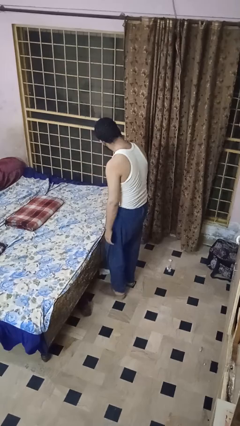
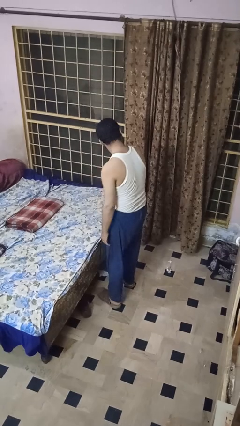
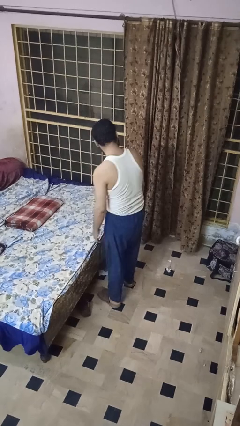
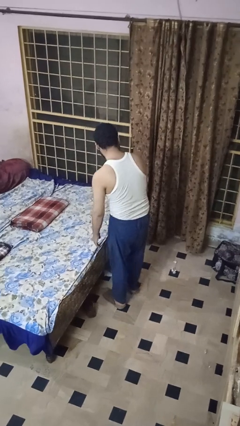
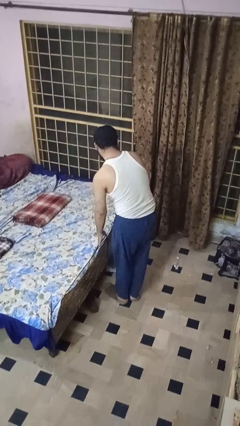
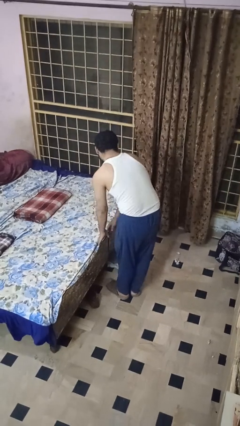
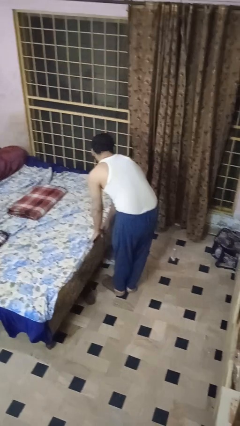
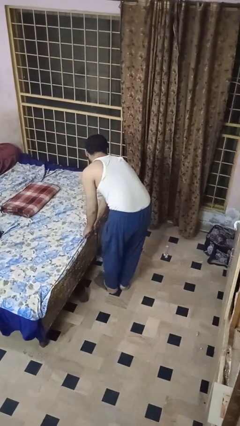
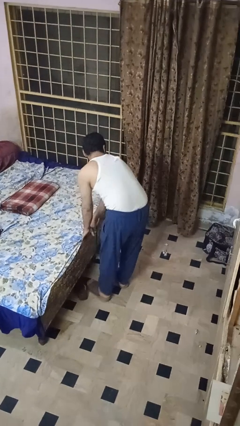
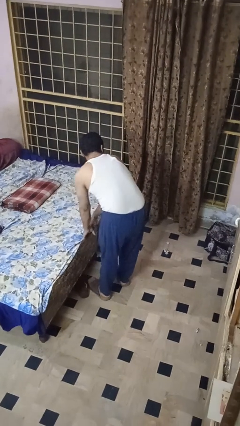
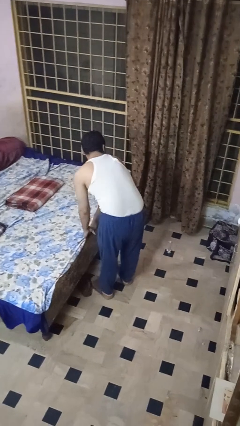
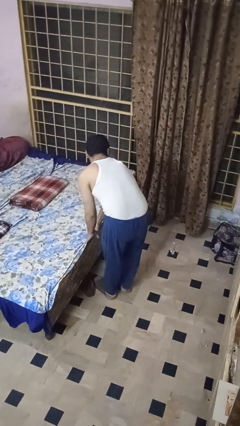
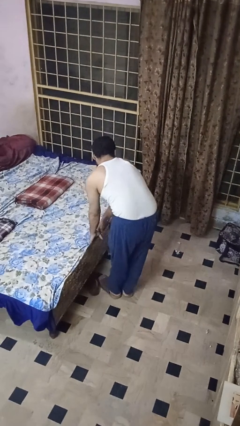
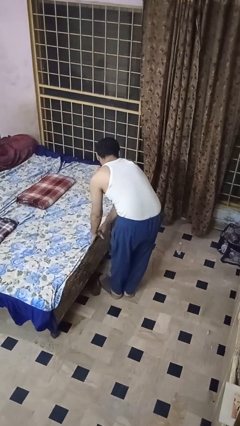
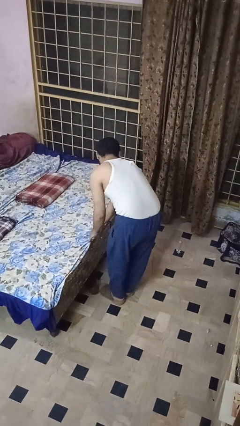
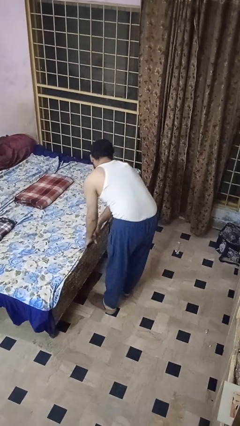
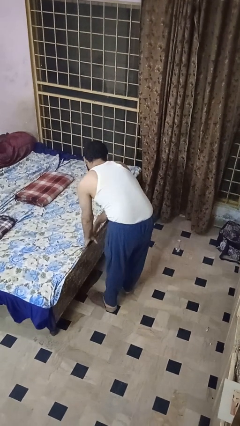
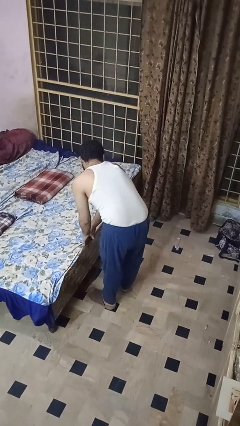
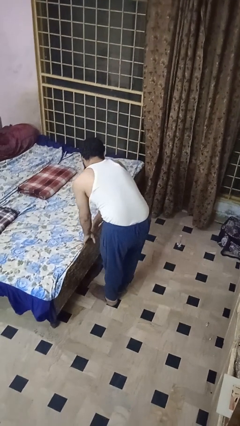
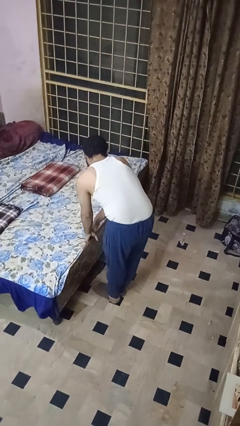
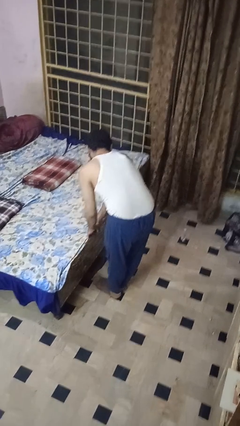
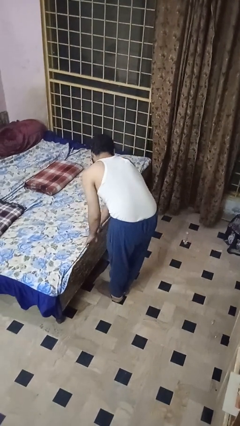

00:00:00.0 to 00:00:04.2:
person makes bed

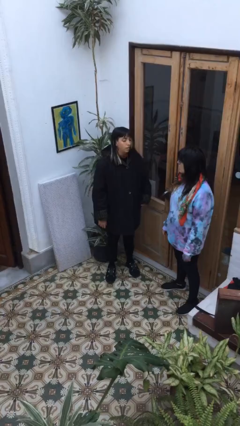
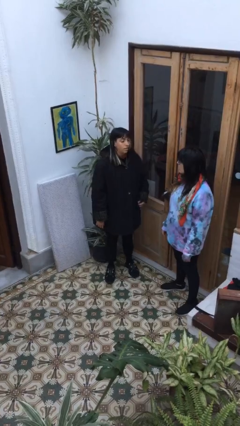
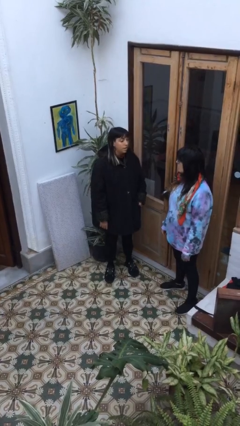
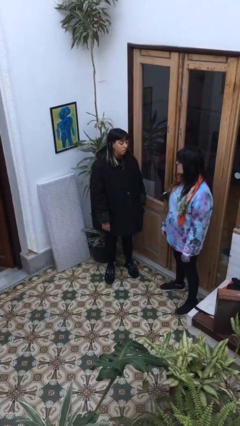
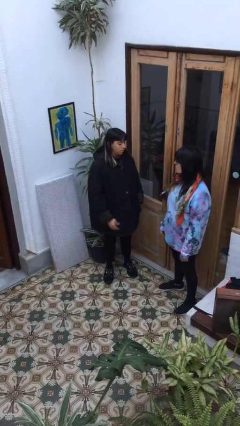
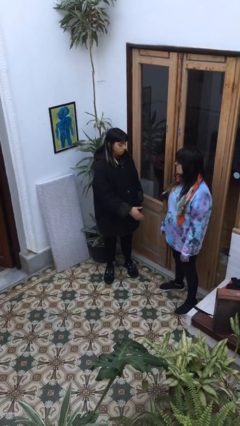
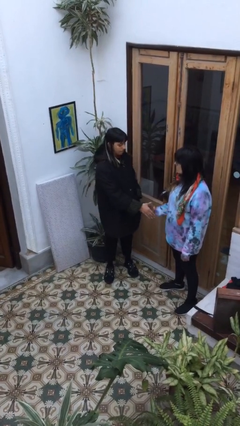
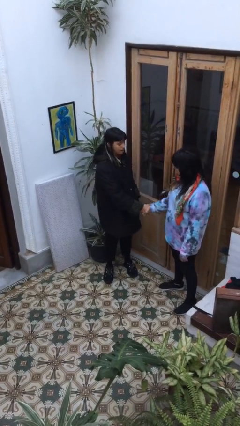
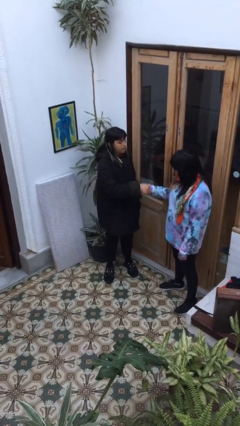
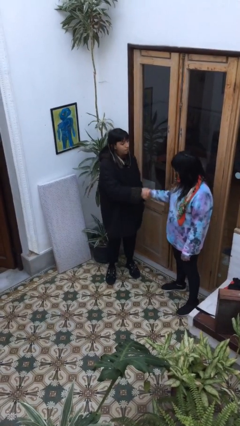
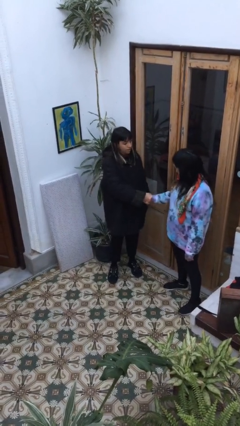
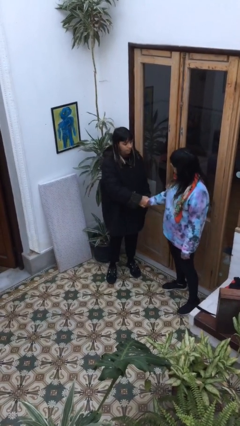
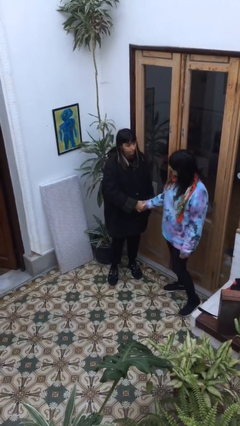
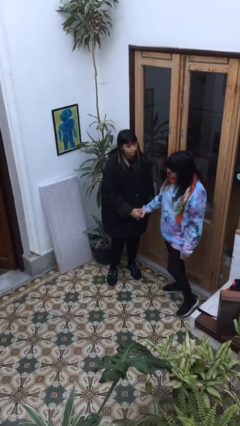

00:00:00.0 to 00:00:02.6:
person shakes hand

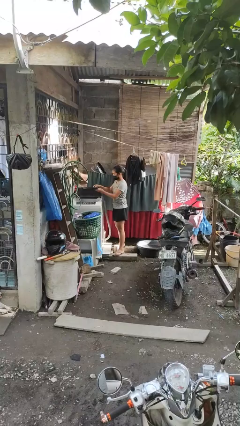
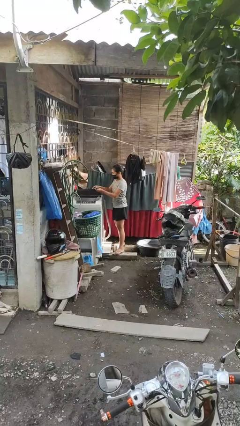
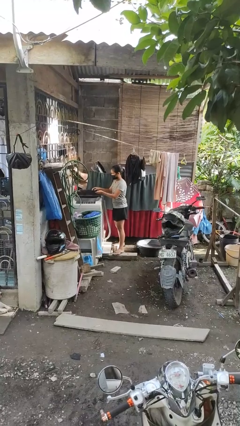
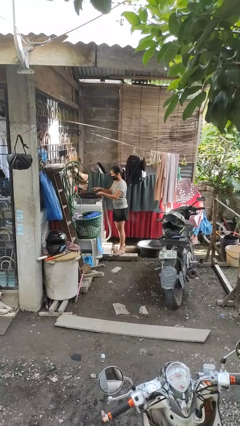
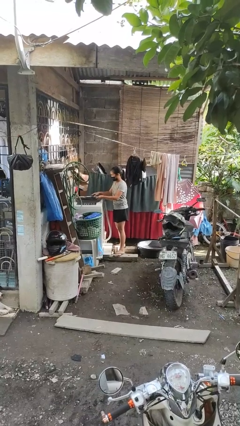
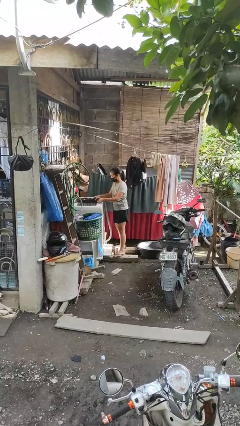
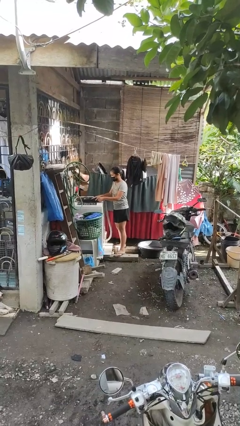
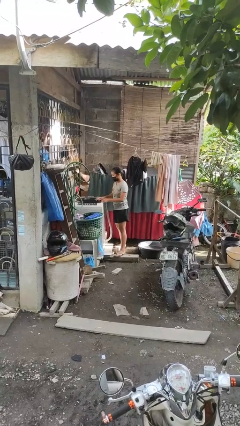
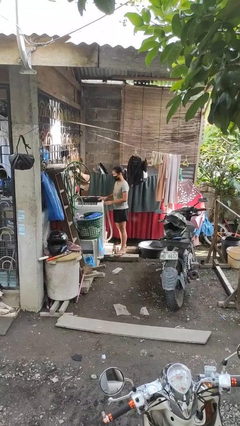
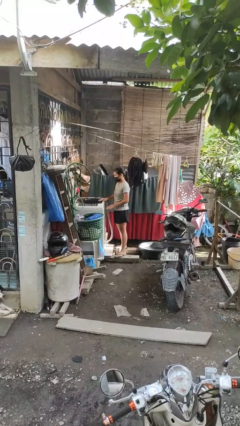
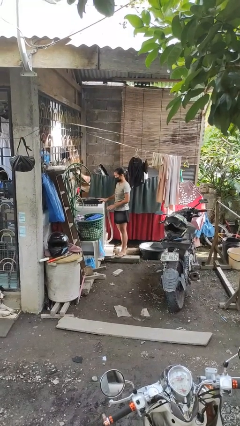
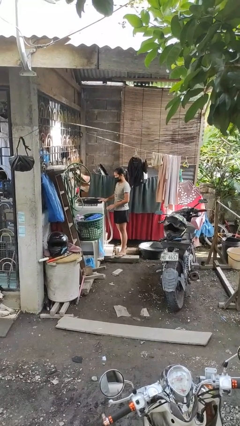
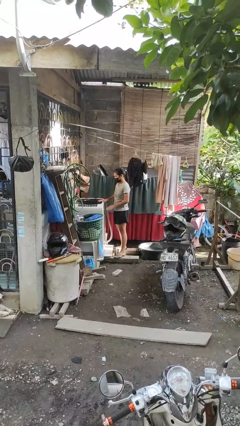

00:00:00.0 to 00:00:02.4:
person closes clothes washer

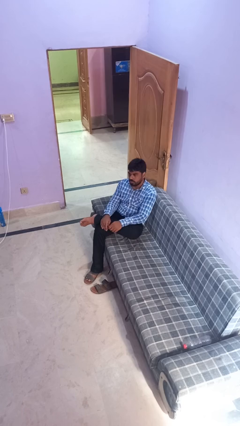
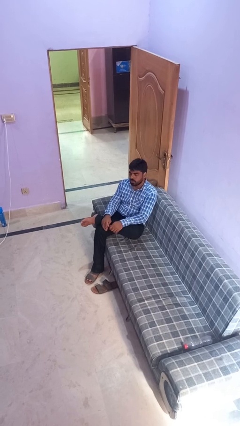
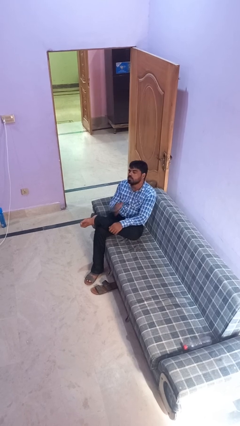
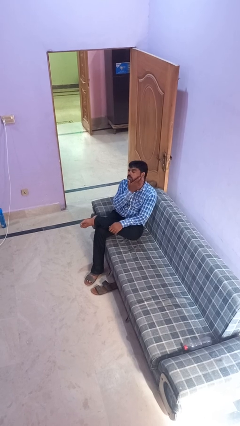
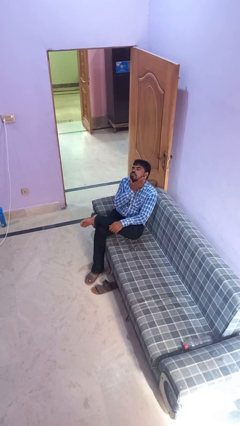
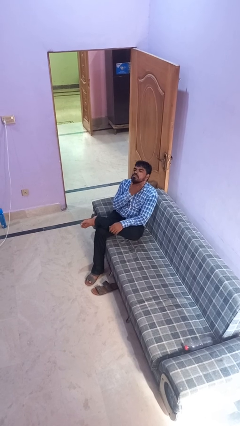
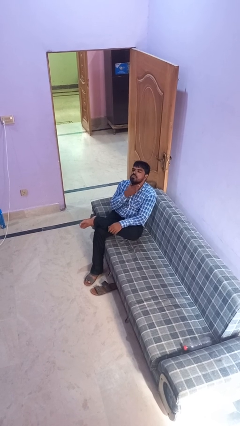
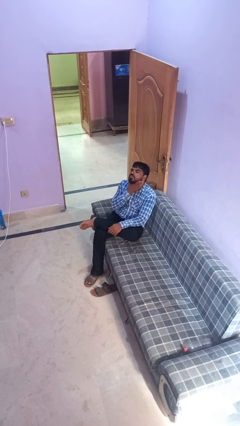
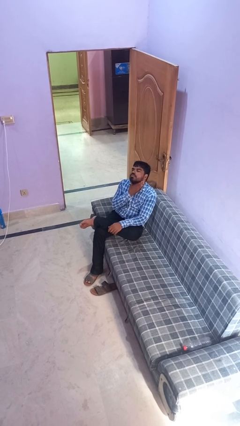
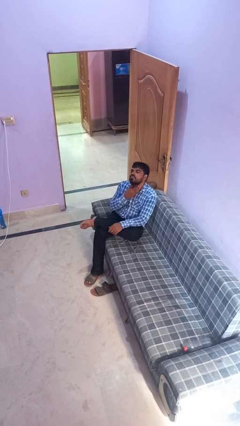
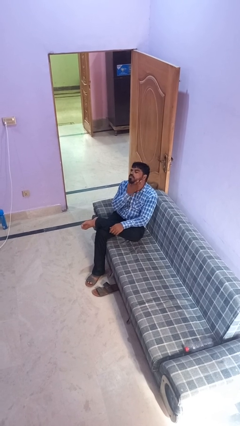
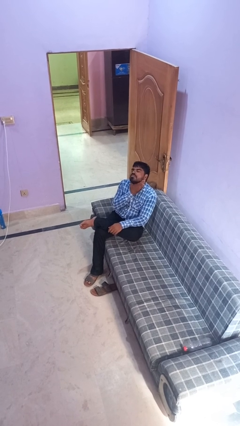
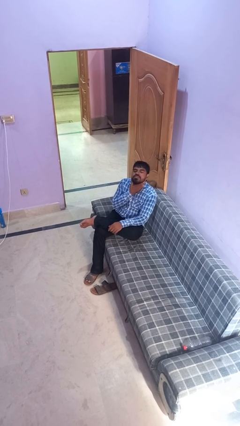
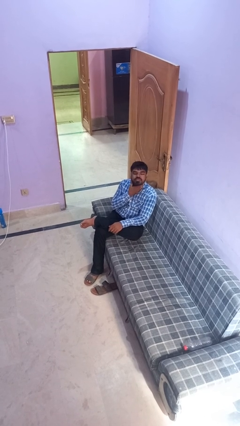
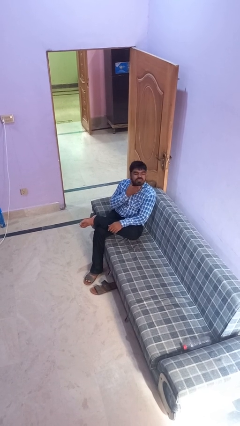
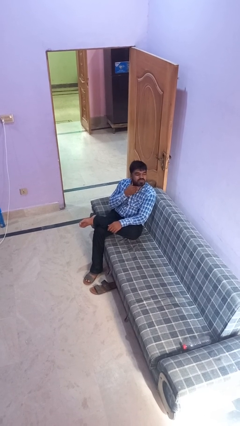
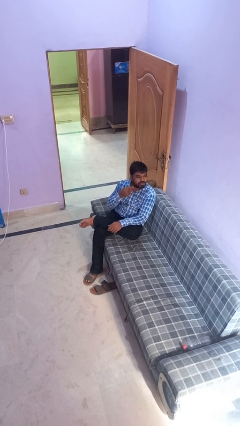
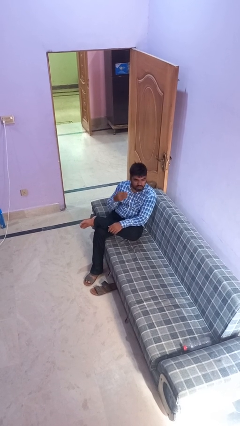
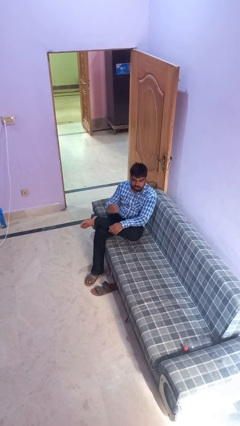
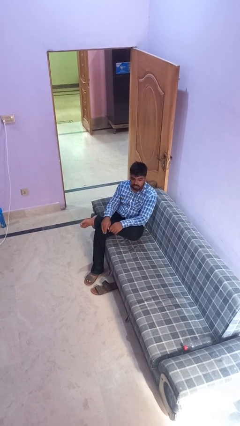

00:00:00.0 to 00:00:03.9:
person rubs neck

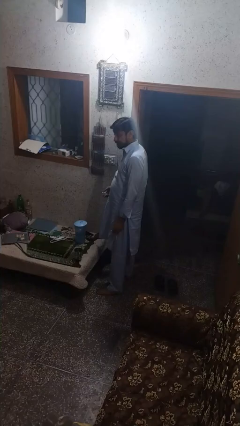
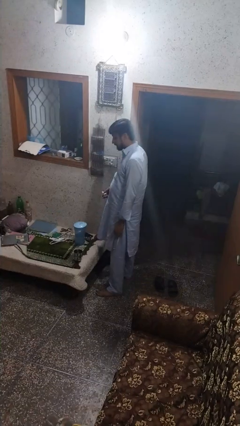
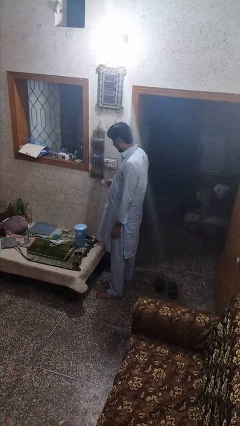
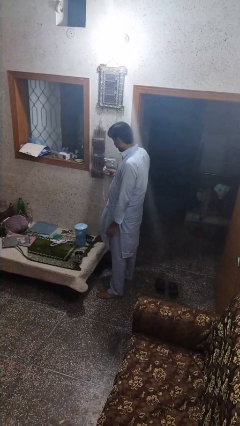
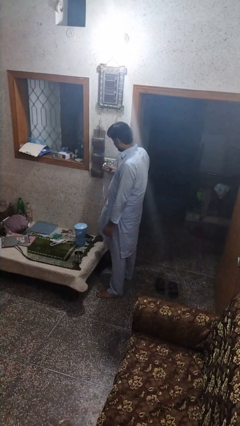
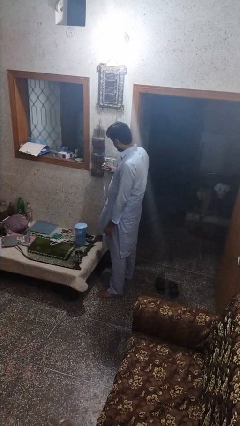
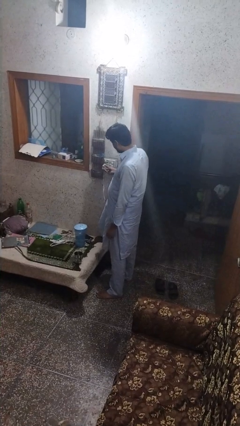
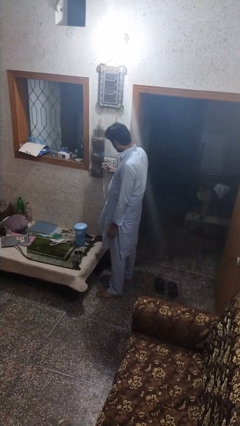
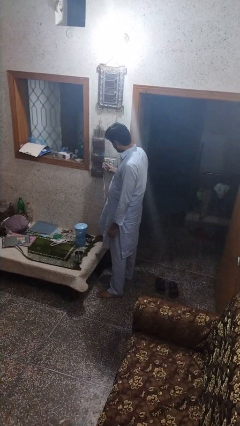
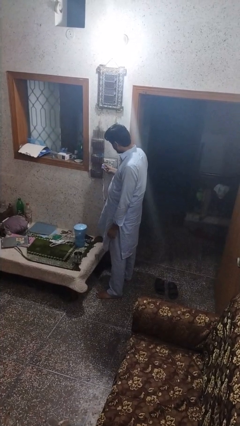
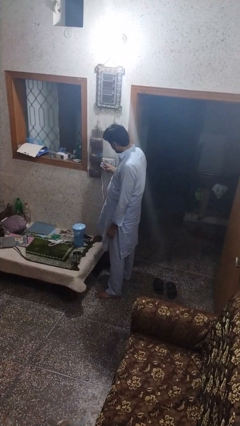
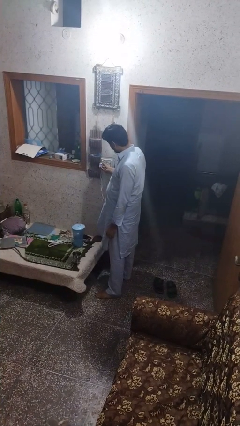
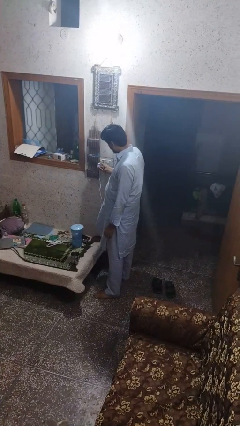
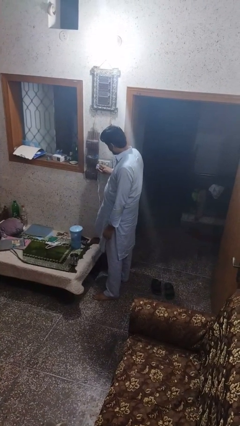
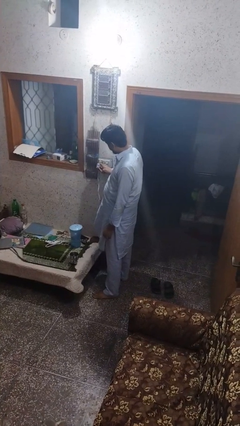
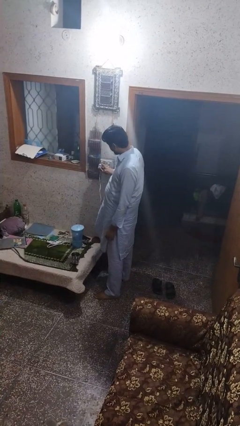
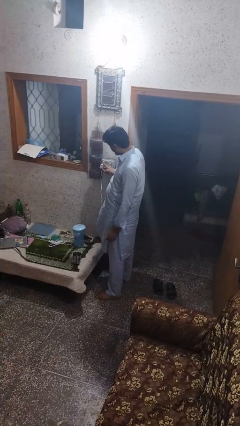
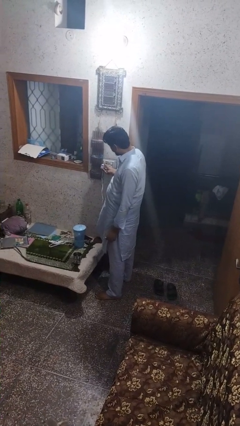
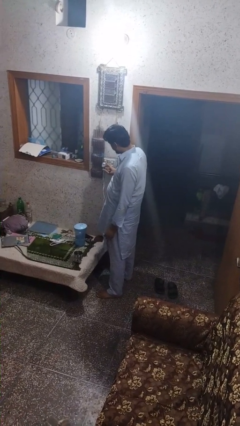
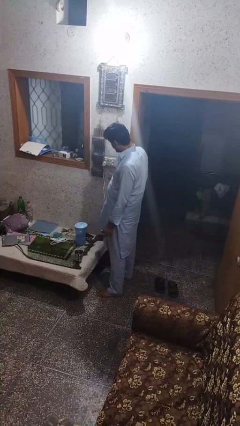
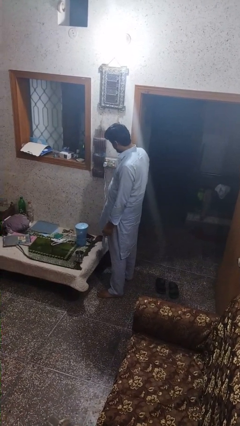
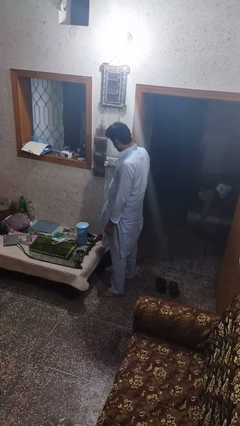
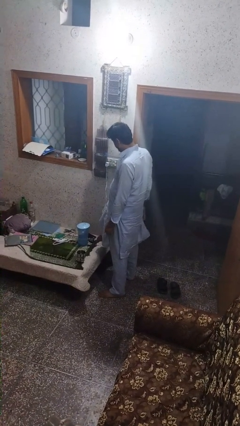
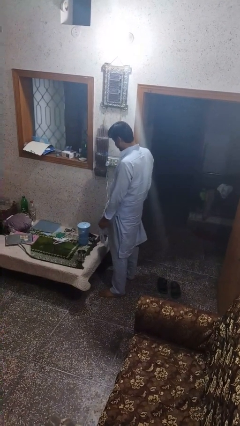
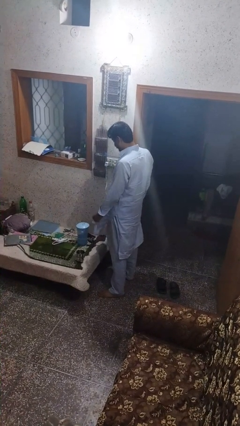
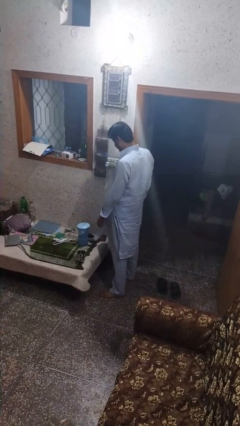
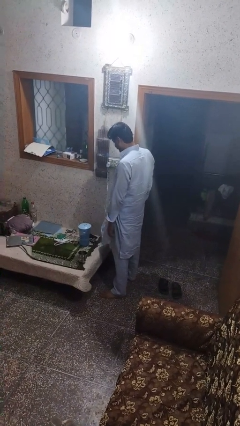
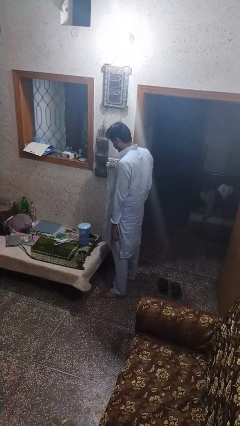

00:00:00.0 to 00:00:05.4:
person plugs into electrical socket
